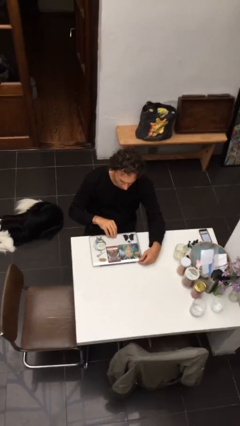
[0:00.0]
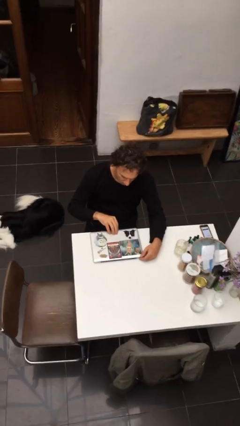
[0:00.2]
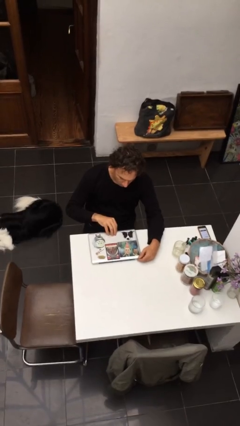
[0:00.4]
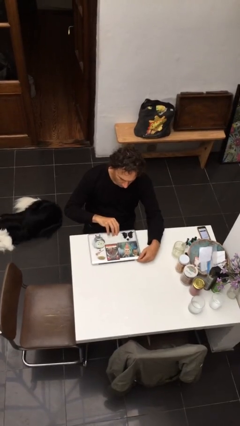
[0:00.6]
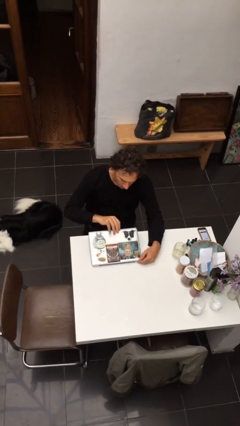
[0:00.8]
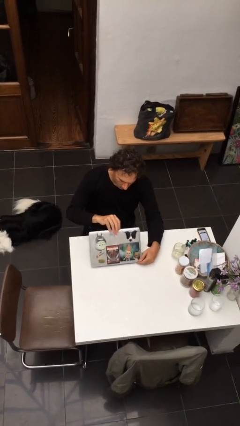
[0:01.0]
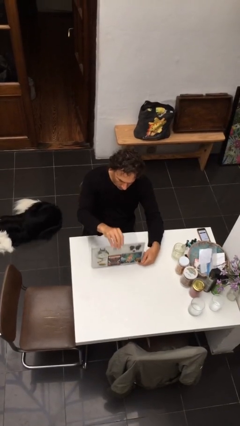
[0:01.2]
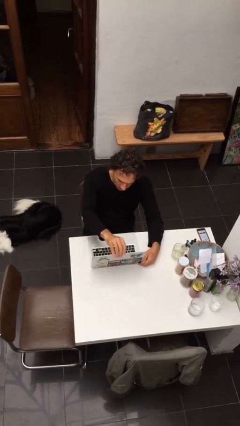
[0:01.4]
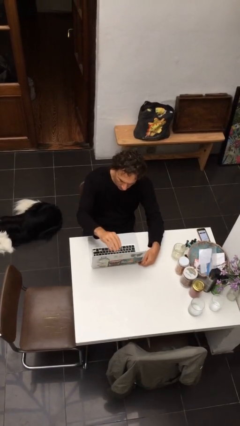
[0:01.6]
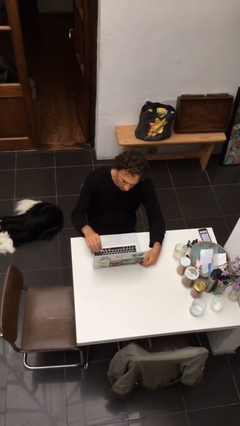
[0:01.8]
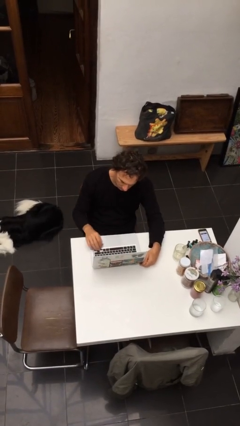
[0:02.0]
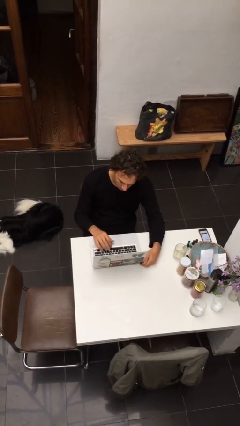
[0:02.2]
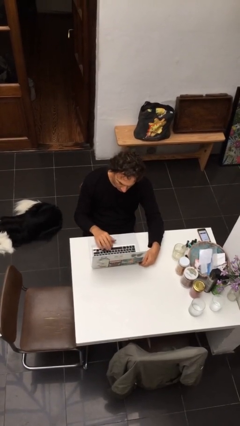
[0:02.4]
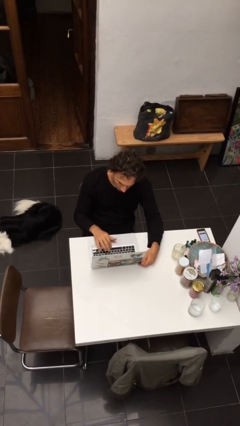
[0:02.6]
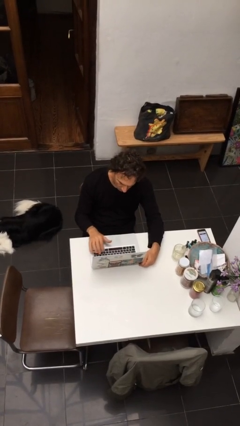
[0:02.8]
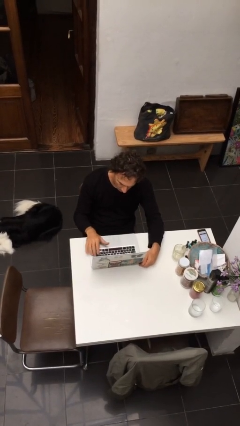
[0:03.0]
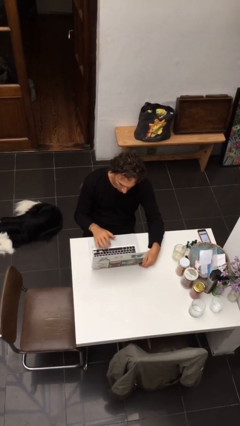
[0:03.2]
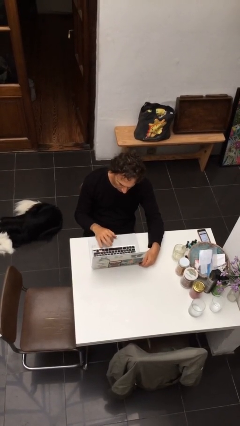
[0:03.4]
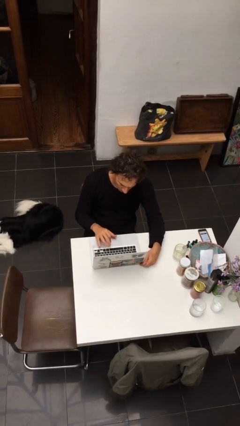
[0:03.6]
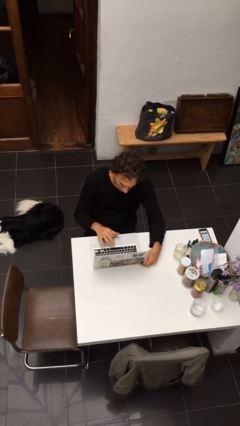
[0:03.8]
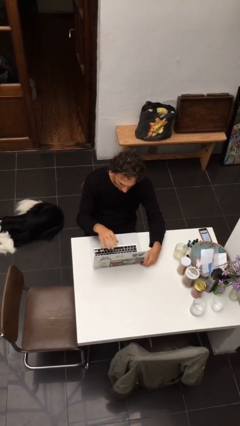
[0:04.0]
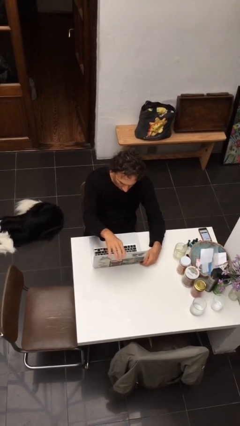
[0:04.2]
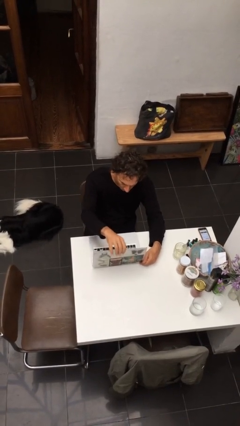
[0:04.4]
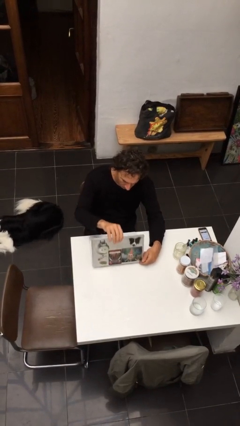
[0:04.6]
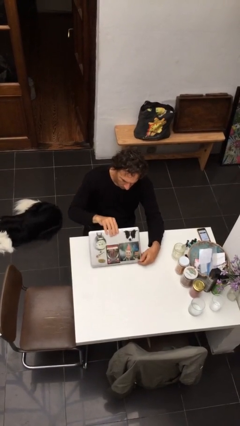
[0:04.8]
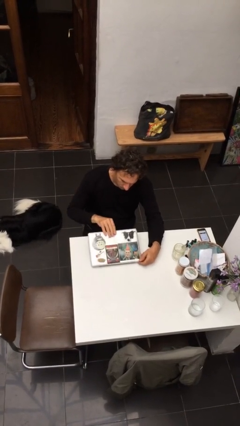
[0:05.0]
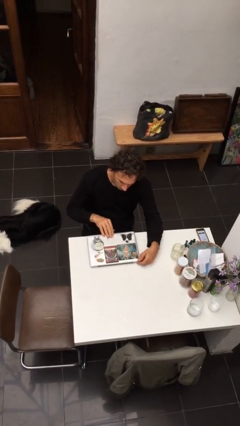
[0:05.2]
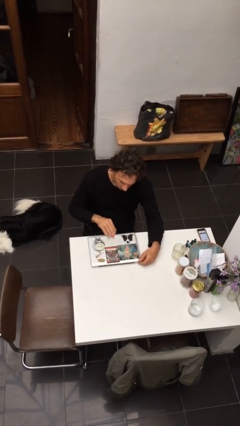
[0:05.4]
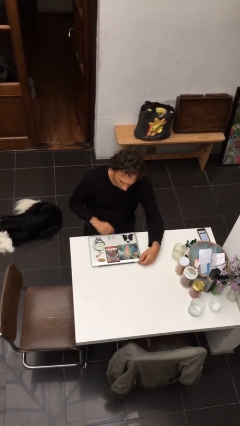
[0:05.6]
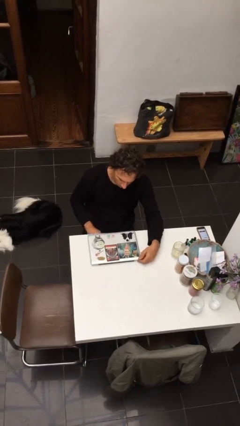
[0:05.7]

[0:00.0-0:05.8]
person interacts with laptop

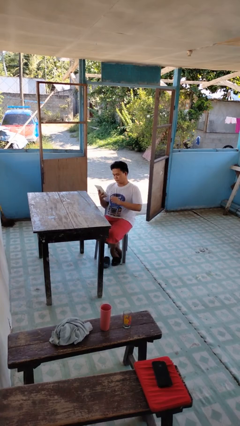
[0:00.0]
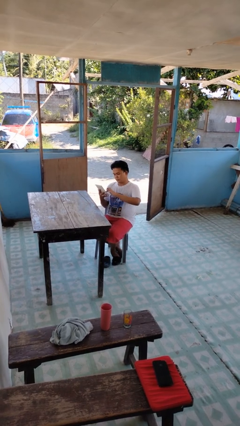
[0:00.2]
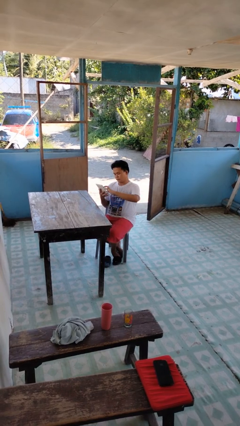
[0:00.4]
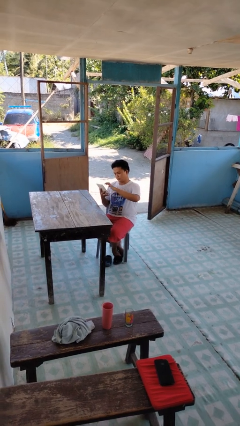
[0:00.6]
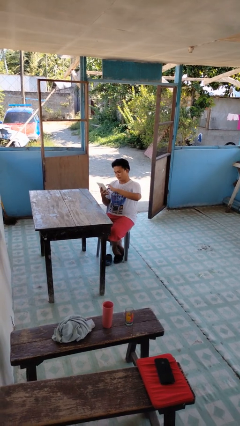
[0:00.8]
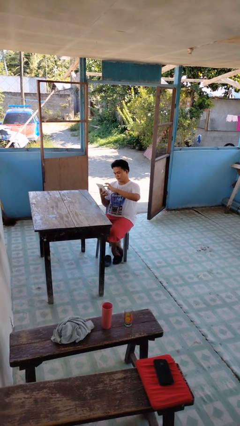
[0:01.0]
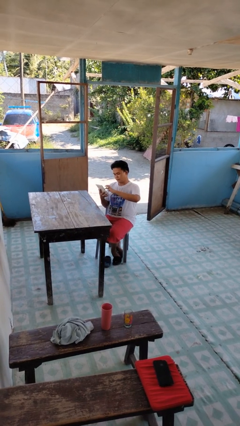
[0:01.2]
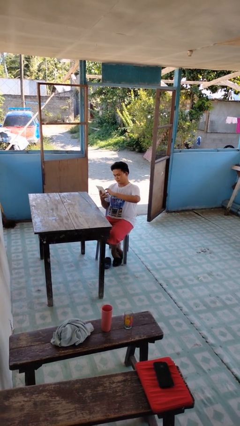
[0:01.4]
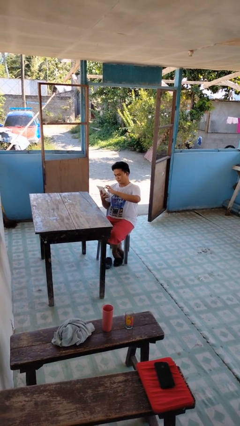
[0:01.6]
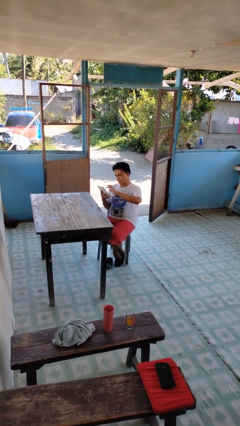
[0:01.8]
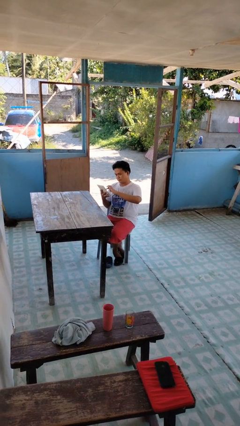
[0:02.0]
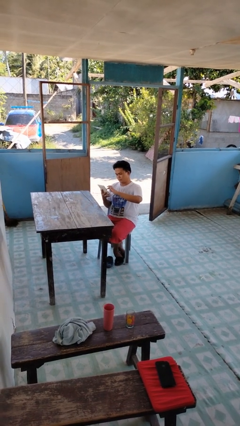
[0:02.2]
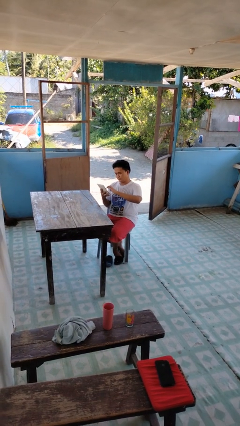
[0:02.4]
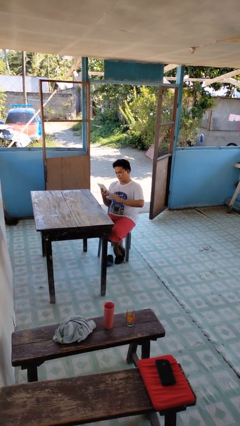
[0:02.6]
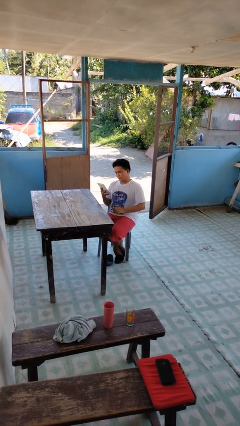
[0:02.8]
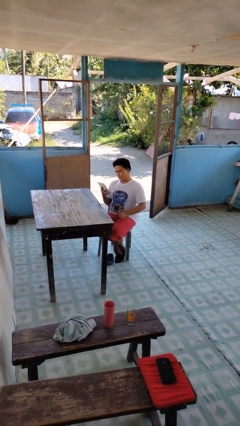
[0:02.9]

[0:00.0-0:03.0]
person interacts with tablet

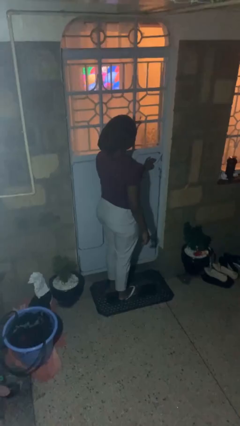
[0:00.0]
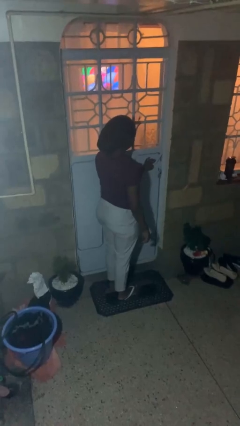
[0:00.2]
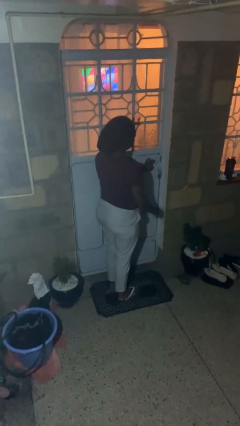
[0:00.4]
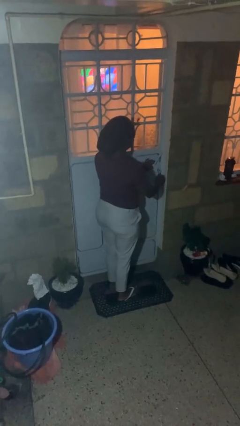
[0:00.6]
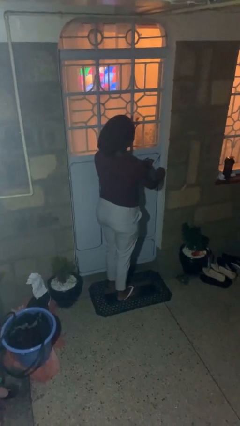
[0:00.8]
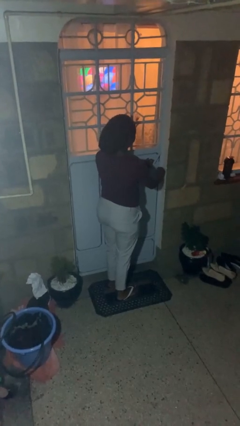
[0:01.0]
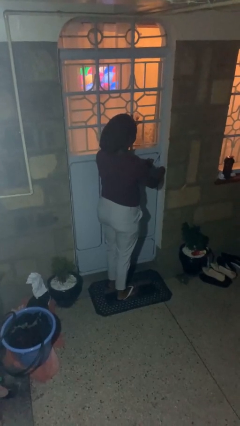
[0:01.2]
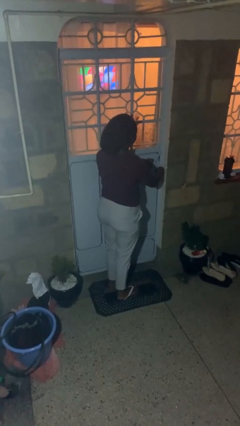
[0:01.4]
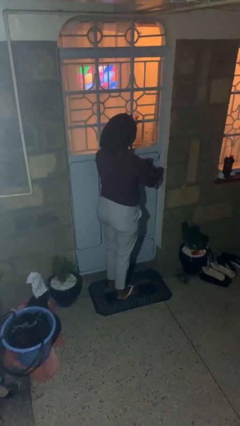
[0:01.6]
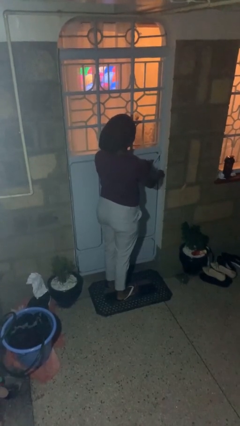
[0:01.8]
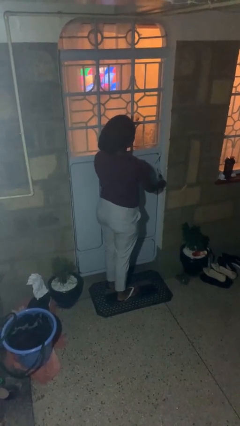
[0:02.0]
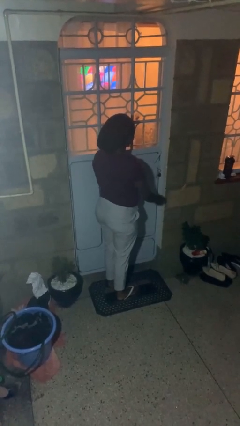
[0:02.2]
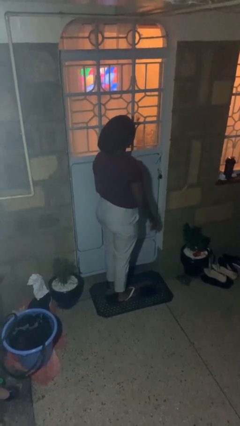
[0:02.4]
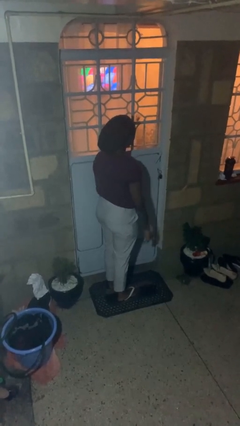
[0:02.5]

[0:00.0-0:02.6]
person locks door with keys

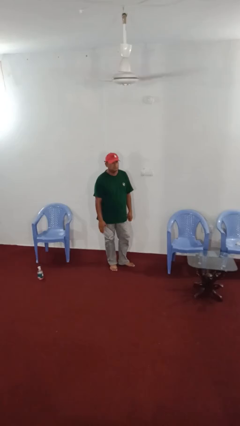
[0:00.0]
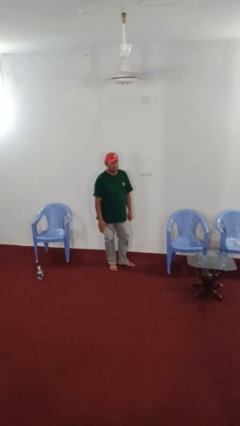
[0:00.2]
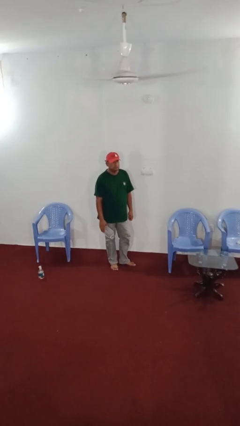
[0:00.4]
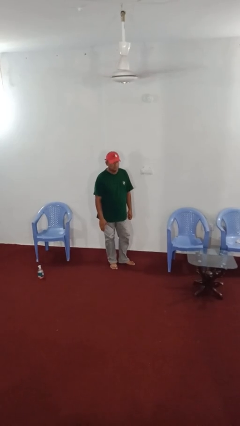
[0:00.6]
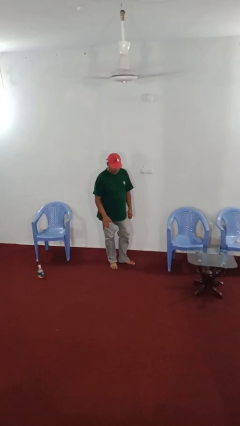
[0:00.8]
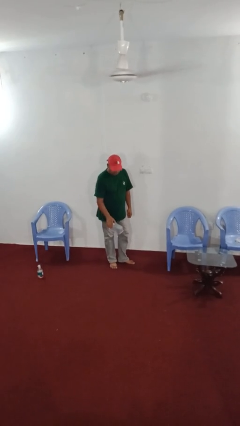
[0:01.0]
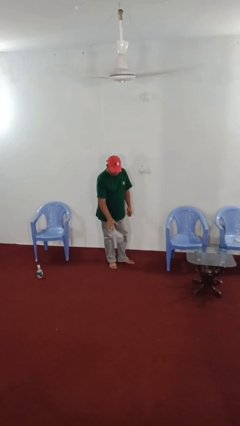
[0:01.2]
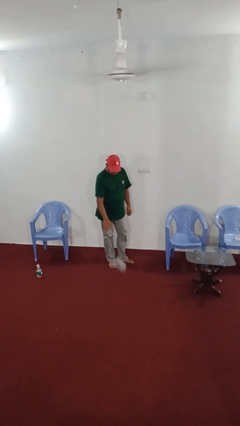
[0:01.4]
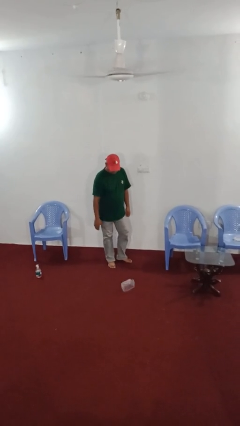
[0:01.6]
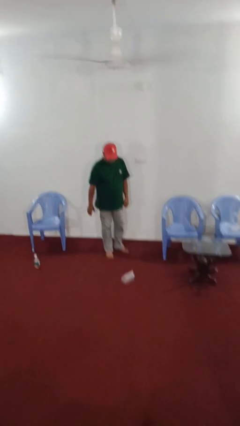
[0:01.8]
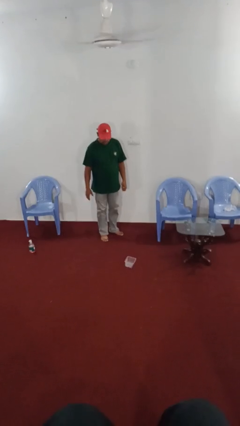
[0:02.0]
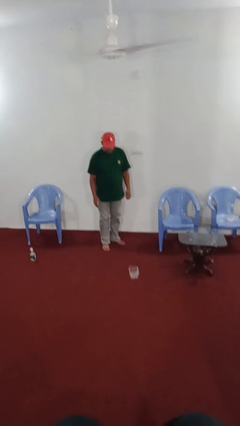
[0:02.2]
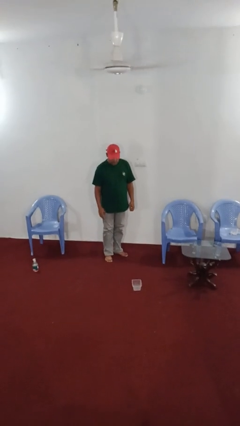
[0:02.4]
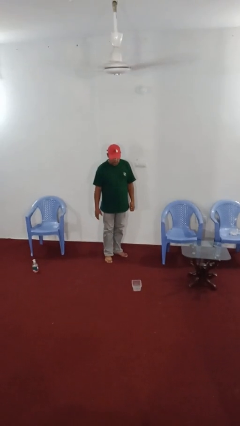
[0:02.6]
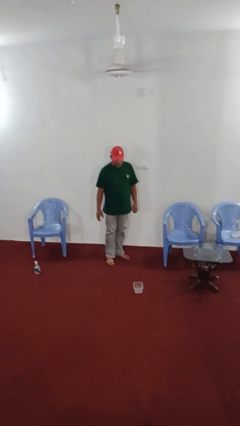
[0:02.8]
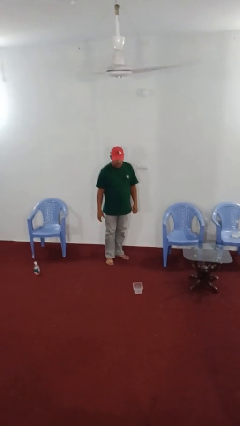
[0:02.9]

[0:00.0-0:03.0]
person throws object to ground

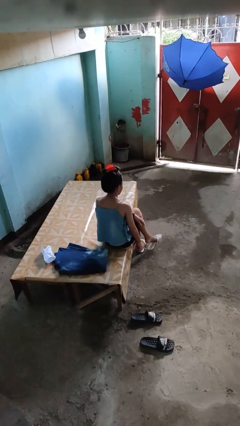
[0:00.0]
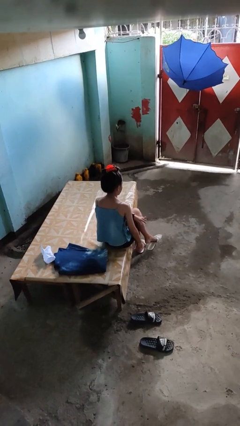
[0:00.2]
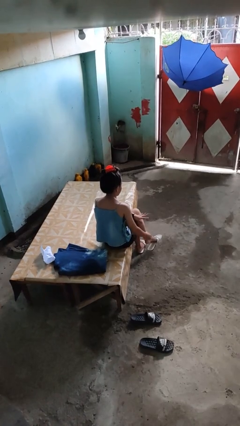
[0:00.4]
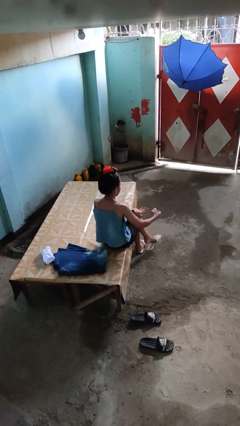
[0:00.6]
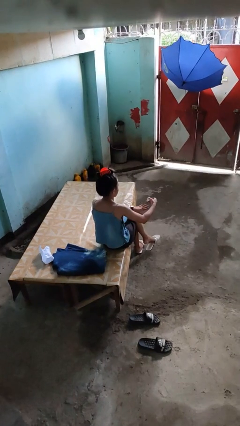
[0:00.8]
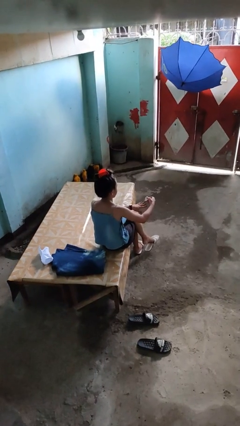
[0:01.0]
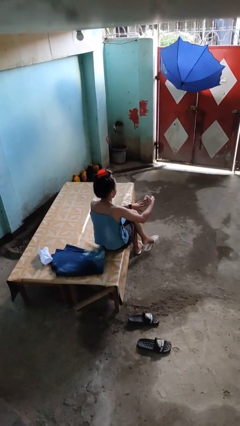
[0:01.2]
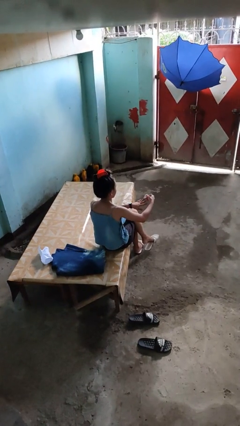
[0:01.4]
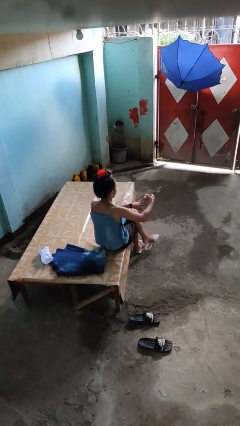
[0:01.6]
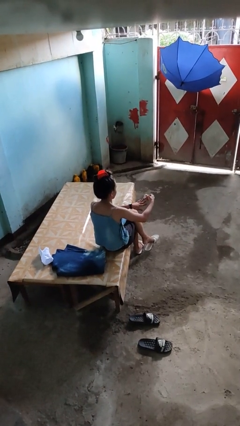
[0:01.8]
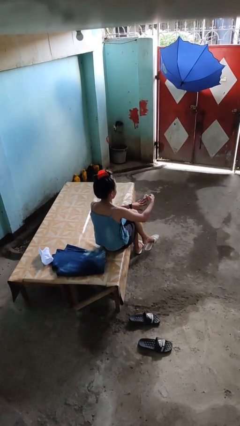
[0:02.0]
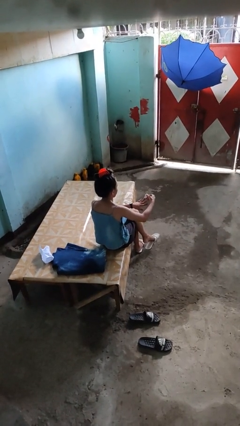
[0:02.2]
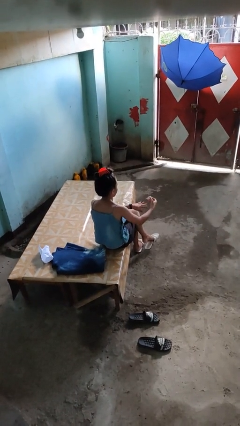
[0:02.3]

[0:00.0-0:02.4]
person clips fingernails

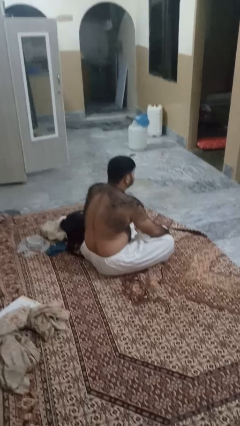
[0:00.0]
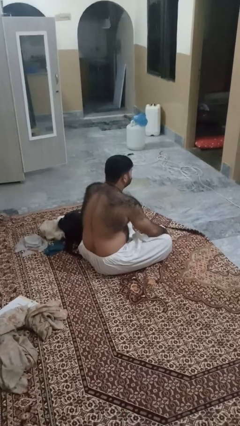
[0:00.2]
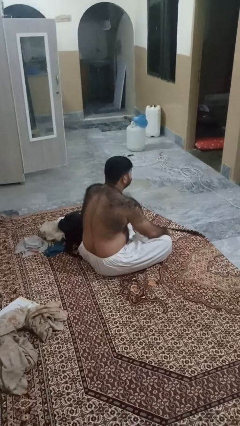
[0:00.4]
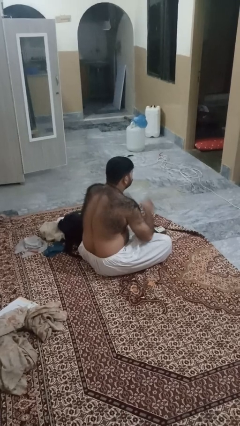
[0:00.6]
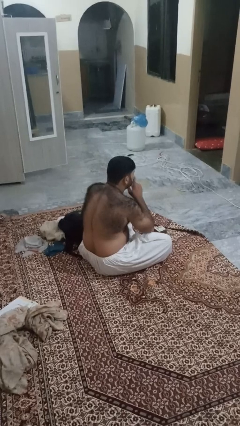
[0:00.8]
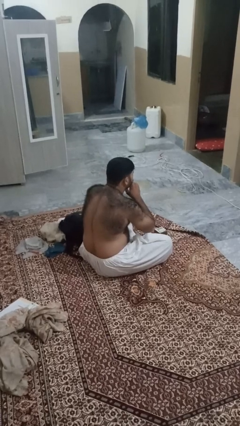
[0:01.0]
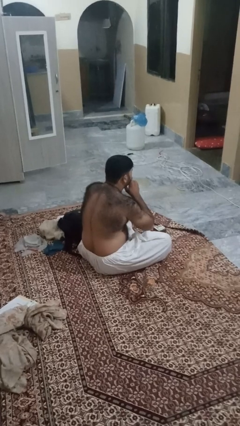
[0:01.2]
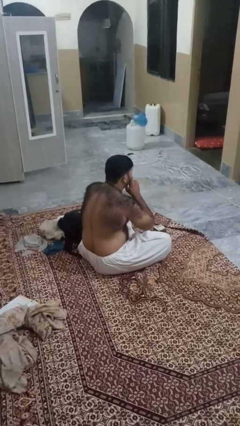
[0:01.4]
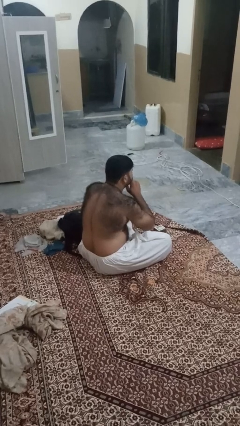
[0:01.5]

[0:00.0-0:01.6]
person gestures be quiet
